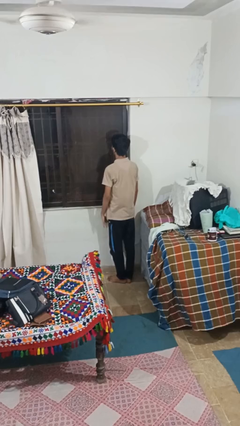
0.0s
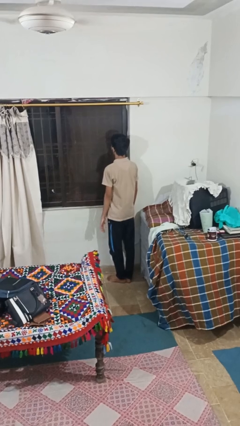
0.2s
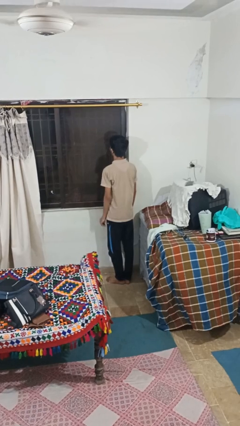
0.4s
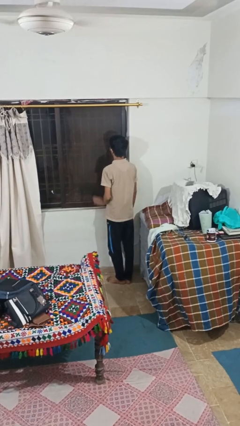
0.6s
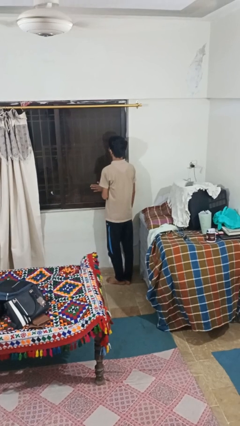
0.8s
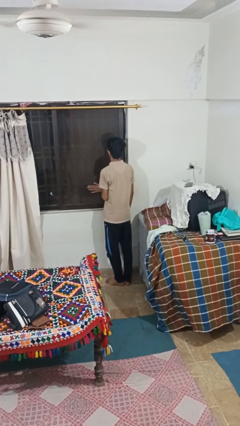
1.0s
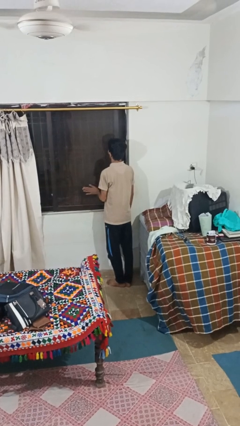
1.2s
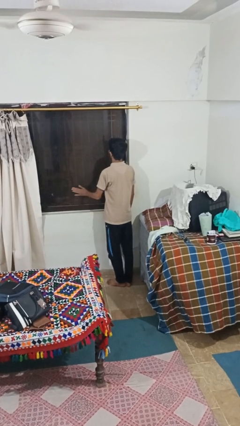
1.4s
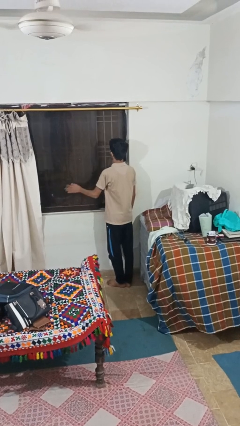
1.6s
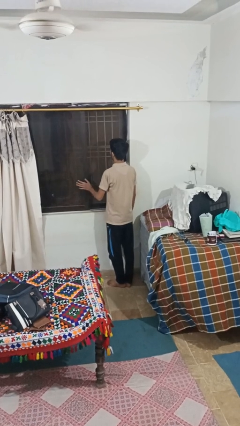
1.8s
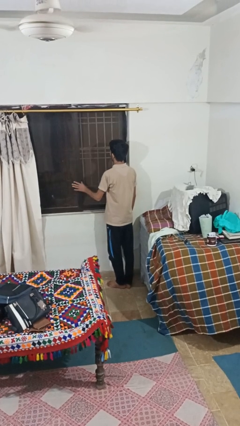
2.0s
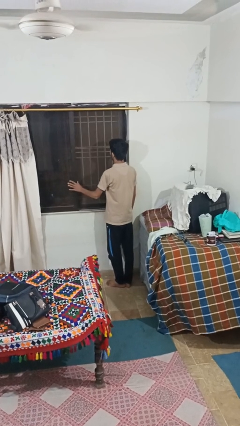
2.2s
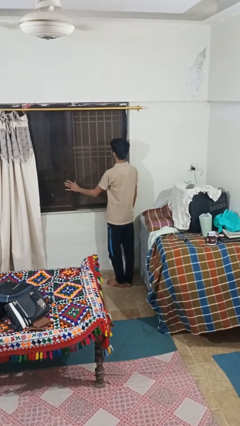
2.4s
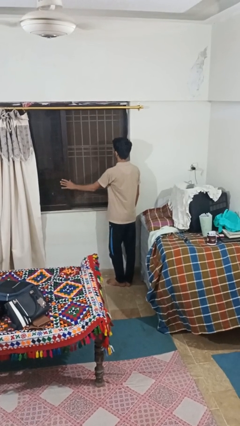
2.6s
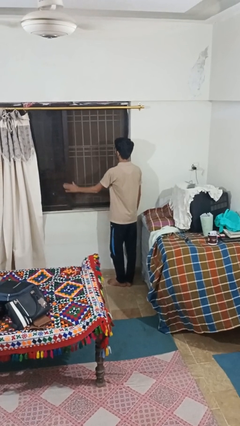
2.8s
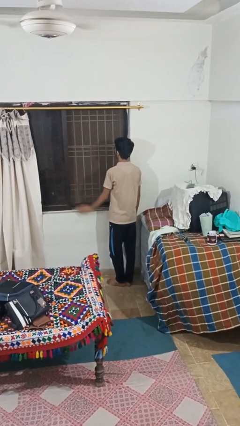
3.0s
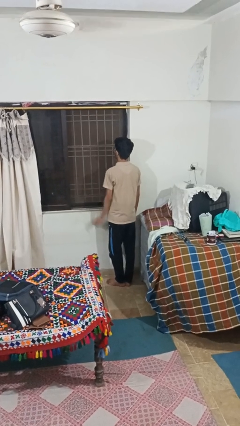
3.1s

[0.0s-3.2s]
person opens sliding door

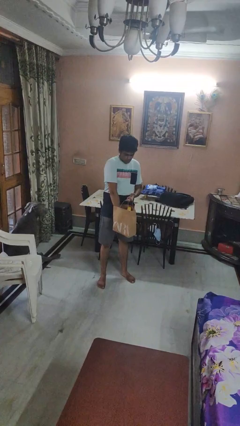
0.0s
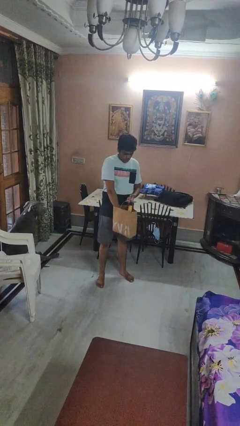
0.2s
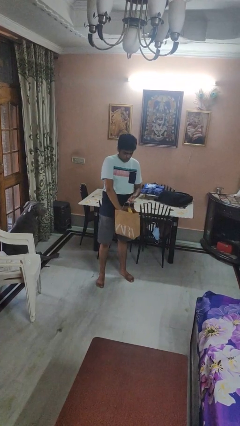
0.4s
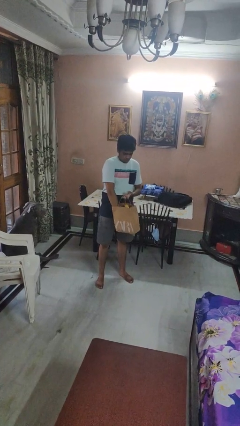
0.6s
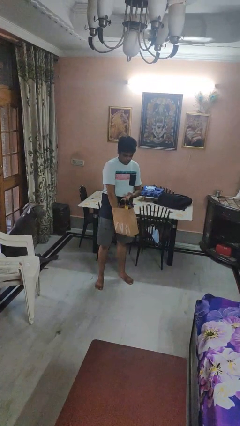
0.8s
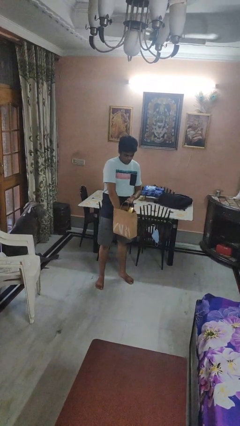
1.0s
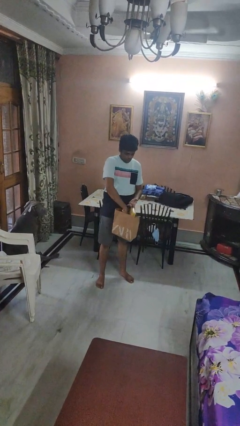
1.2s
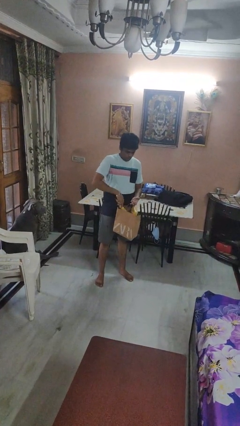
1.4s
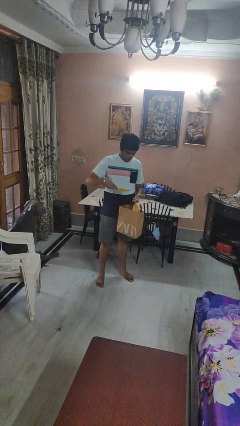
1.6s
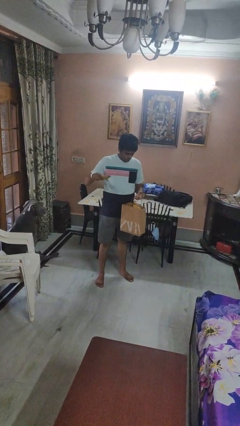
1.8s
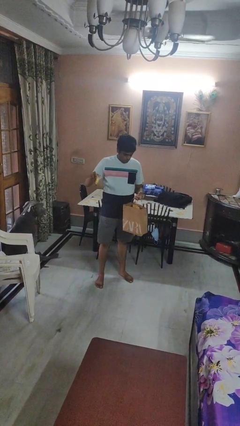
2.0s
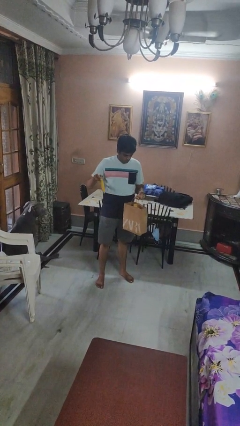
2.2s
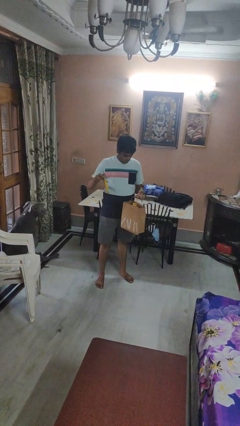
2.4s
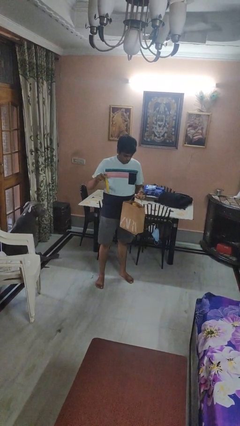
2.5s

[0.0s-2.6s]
person takes object from bag

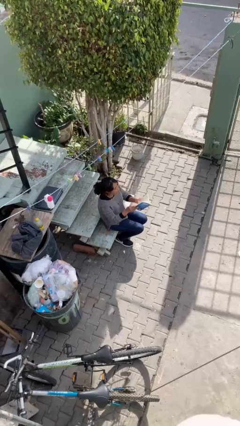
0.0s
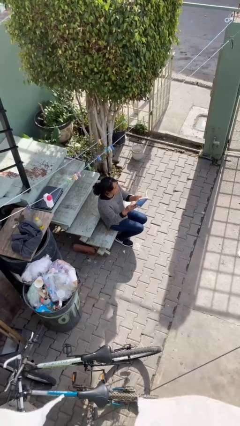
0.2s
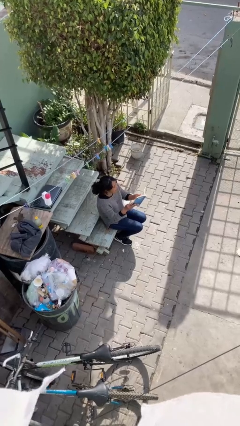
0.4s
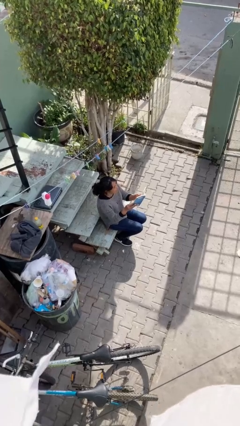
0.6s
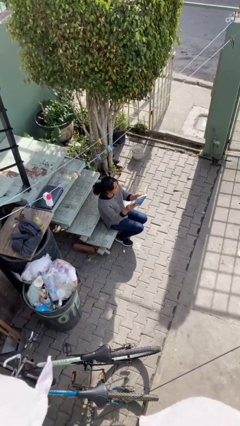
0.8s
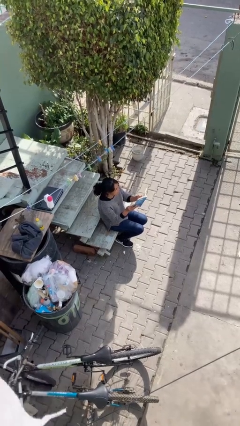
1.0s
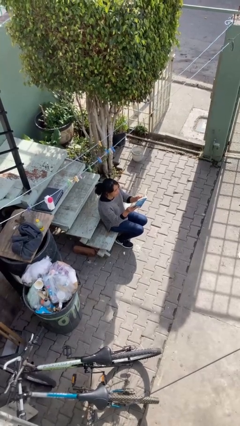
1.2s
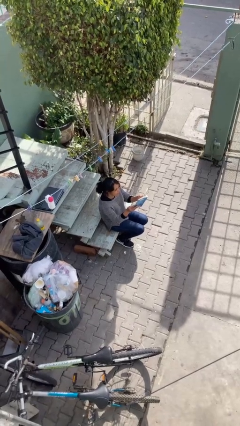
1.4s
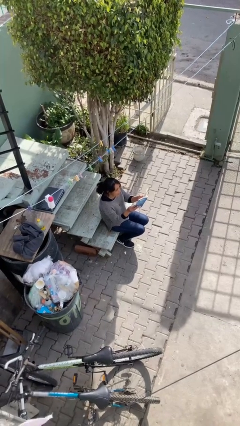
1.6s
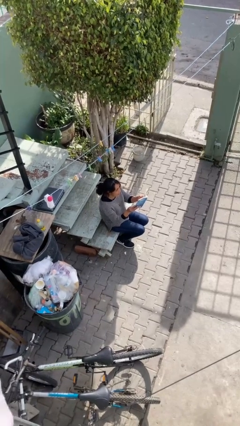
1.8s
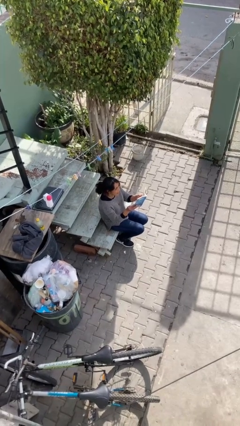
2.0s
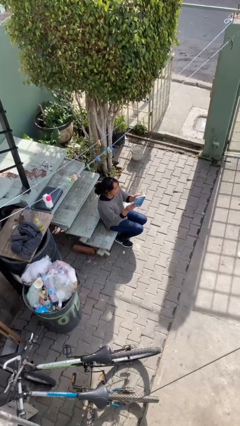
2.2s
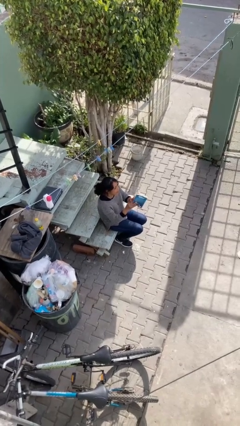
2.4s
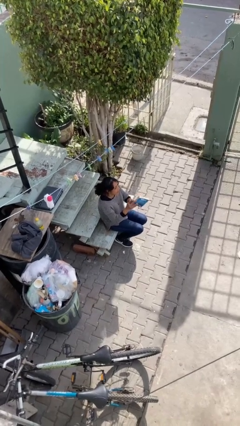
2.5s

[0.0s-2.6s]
person reads document

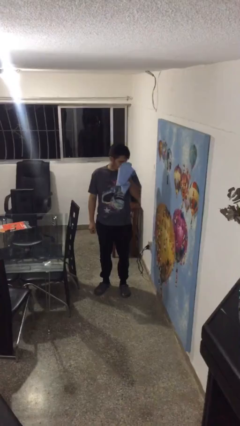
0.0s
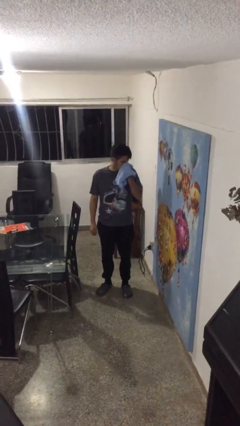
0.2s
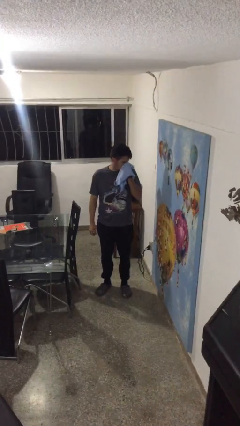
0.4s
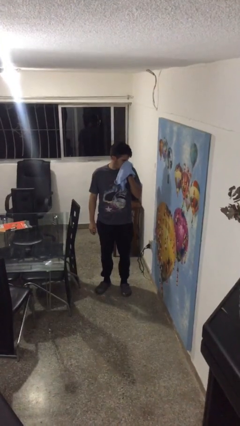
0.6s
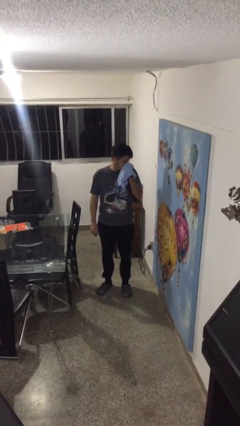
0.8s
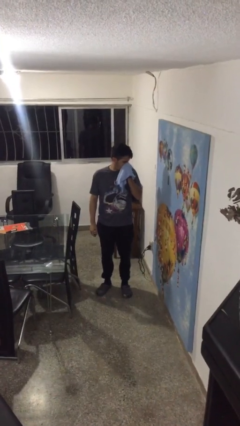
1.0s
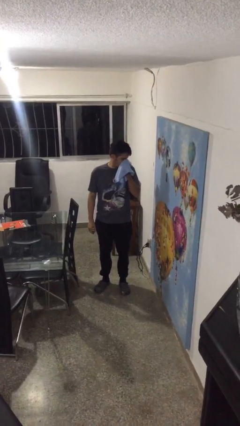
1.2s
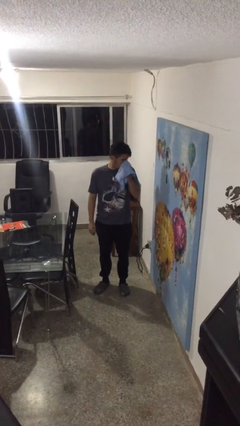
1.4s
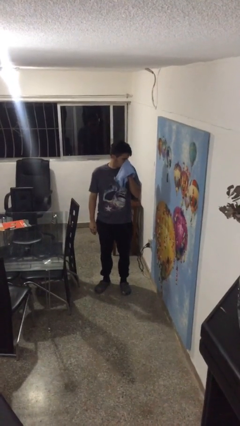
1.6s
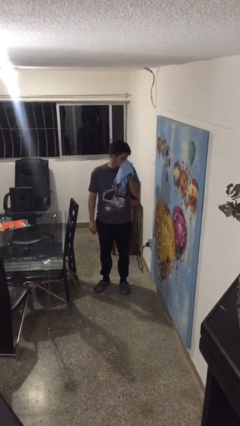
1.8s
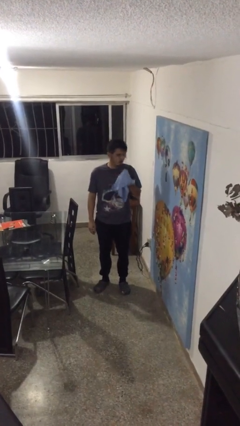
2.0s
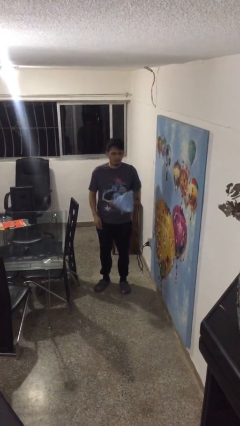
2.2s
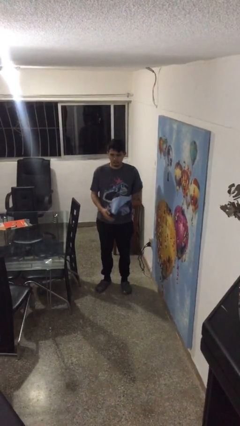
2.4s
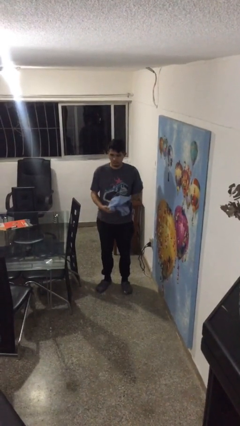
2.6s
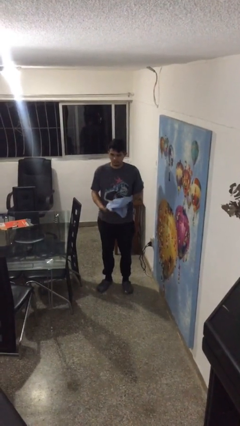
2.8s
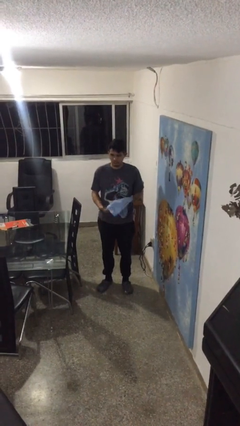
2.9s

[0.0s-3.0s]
person blows nose

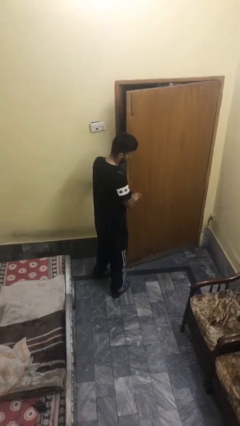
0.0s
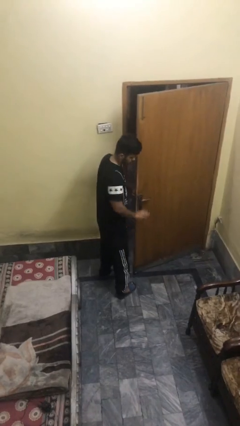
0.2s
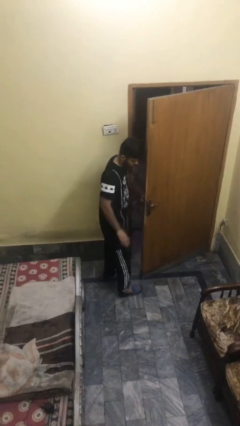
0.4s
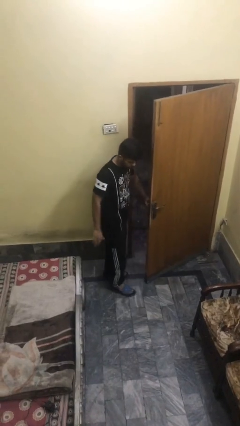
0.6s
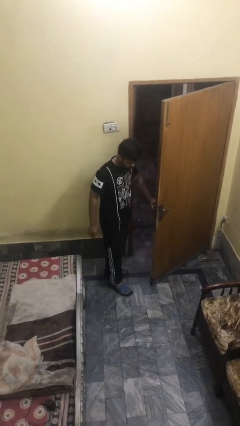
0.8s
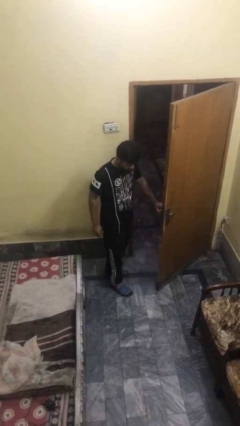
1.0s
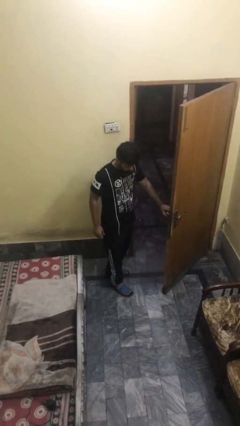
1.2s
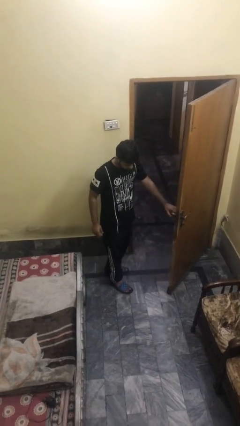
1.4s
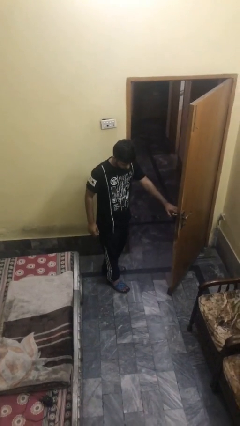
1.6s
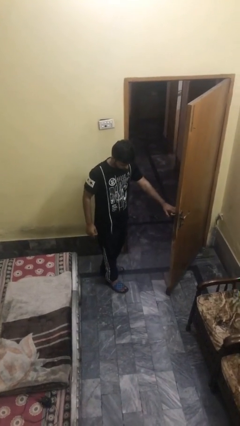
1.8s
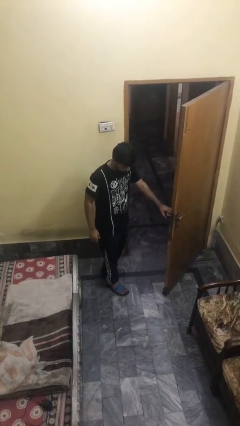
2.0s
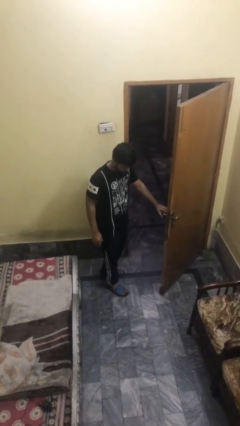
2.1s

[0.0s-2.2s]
person opens facility door

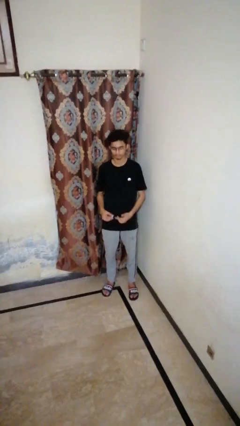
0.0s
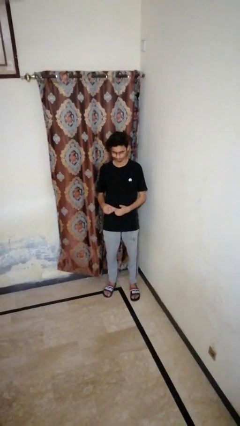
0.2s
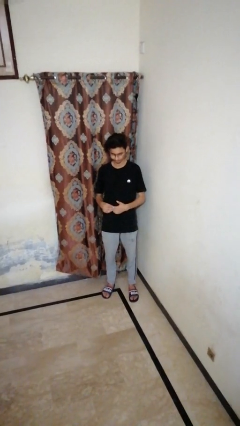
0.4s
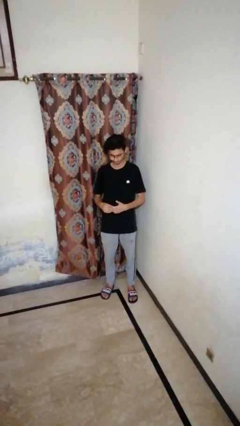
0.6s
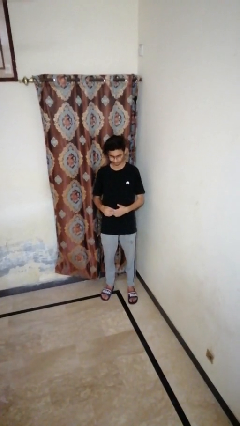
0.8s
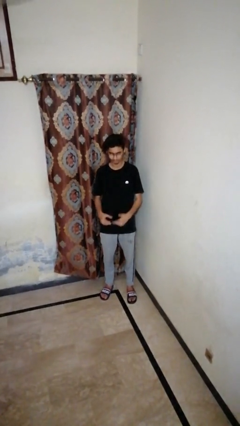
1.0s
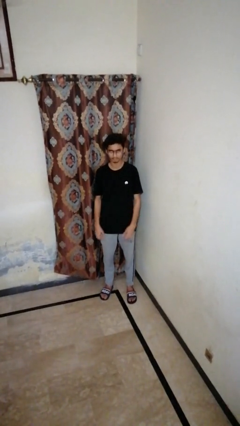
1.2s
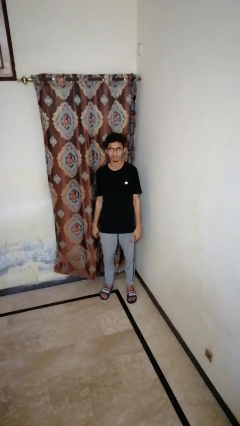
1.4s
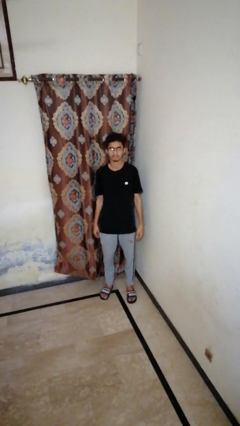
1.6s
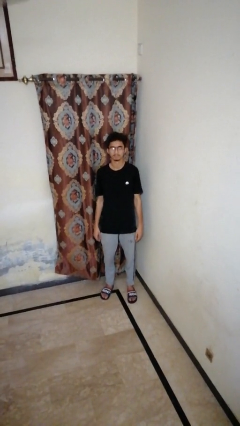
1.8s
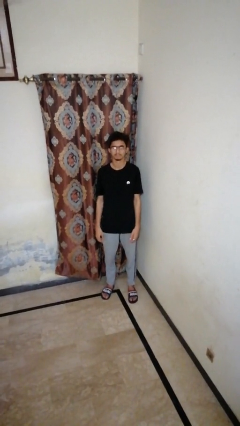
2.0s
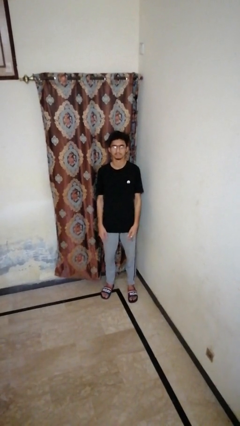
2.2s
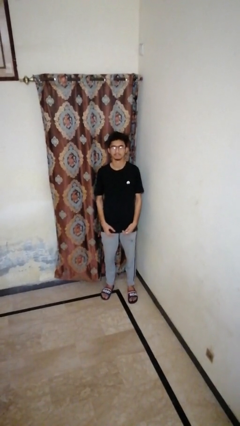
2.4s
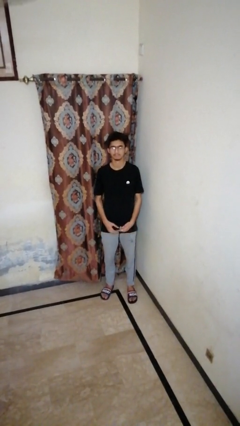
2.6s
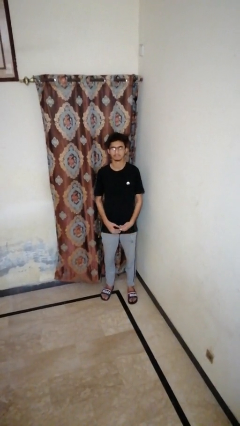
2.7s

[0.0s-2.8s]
person puts on ring

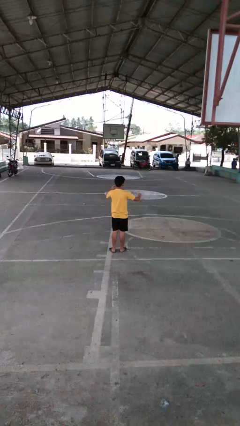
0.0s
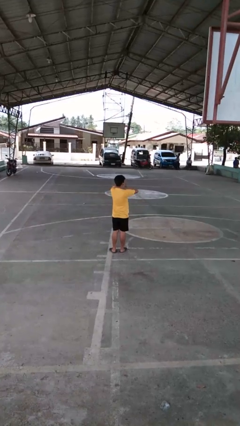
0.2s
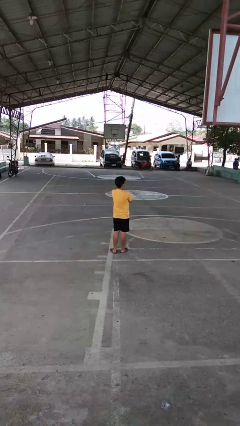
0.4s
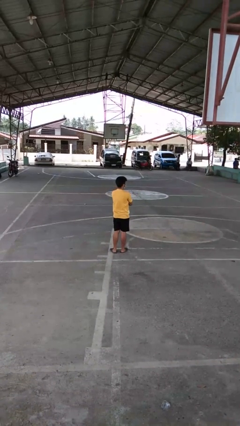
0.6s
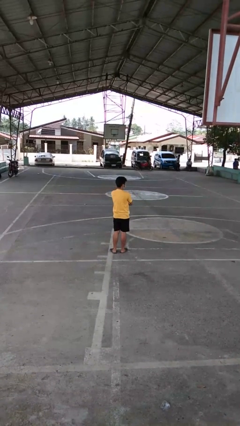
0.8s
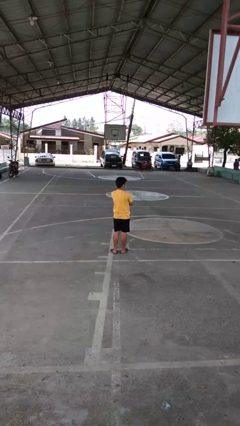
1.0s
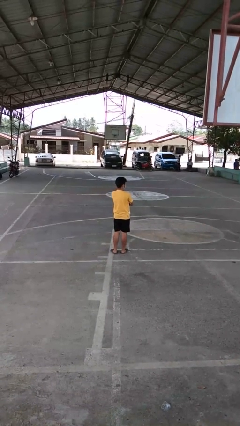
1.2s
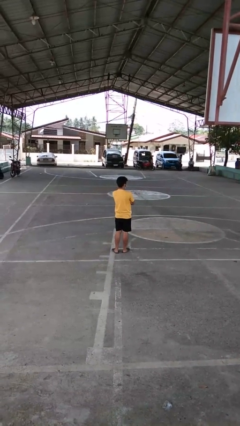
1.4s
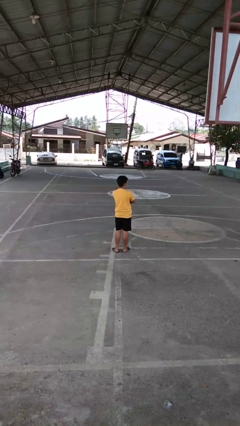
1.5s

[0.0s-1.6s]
person crosses arms
